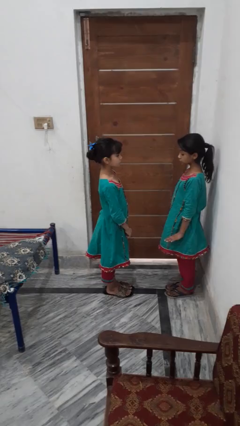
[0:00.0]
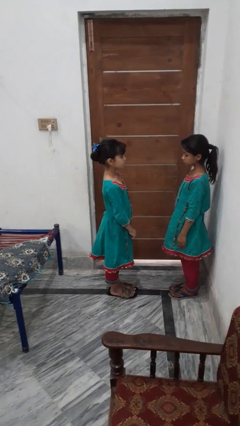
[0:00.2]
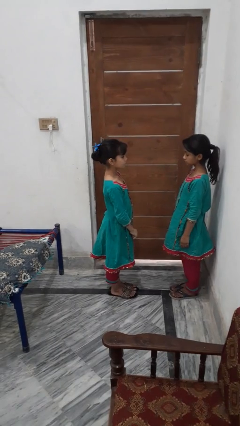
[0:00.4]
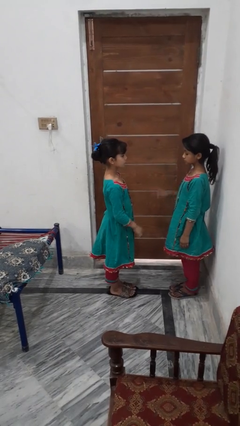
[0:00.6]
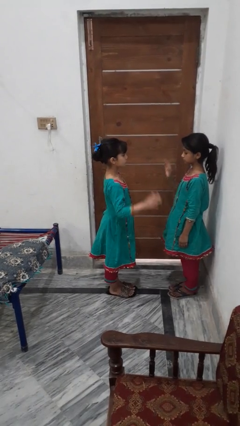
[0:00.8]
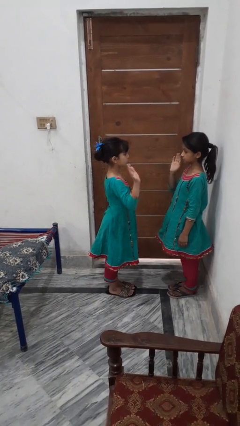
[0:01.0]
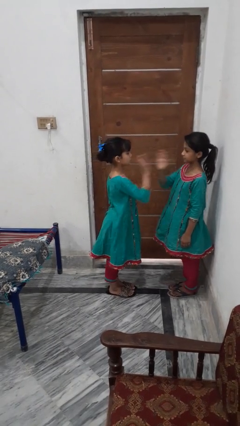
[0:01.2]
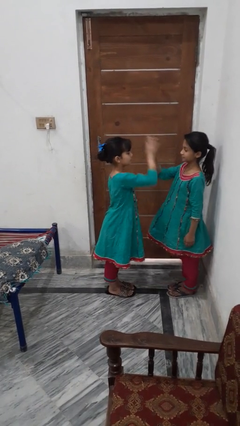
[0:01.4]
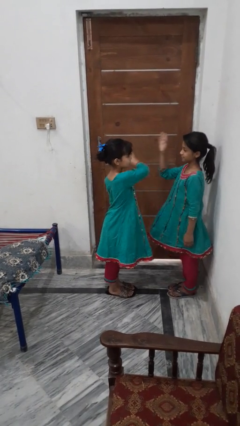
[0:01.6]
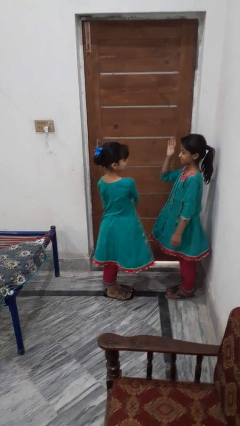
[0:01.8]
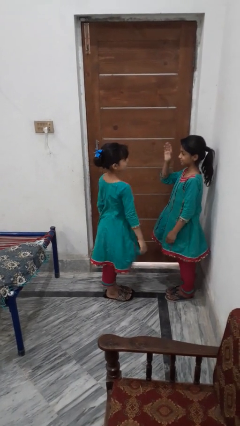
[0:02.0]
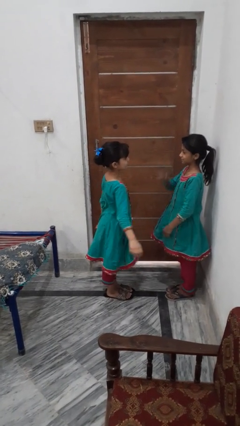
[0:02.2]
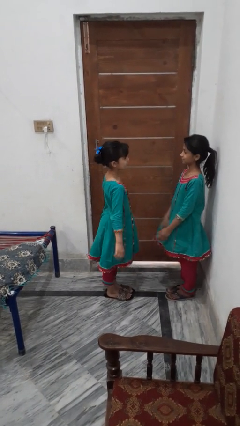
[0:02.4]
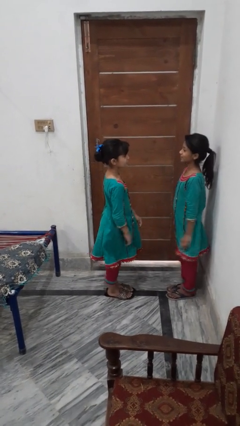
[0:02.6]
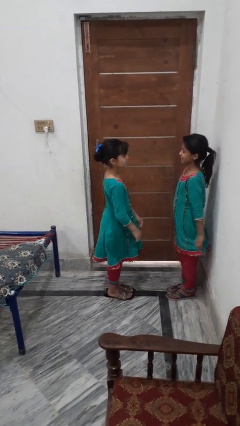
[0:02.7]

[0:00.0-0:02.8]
person highfives hand

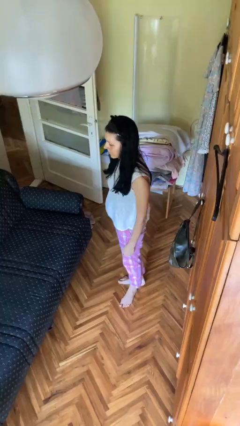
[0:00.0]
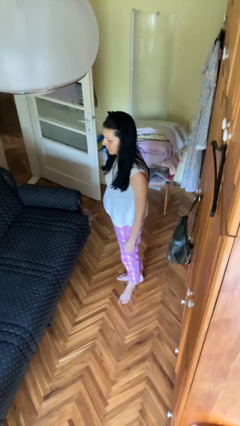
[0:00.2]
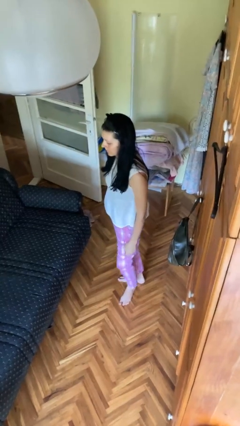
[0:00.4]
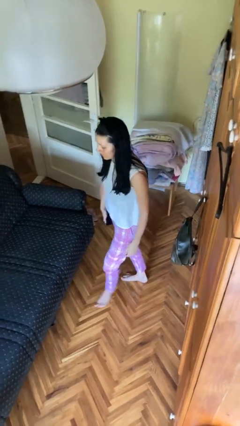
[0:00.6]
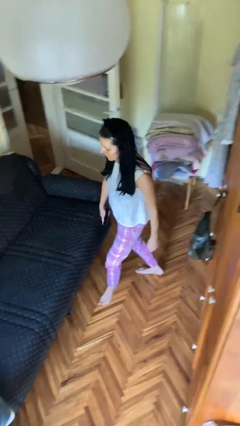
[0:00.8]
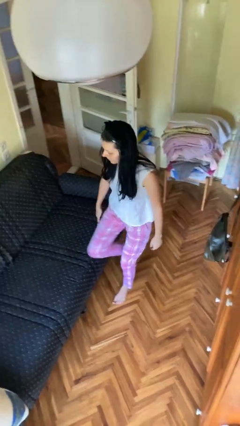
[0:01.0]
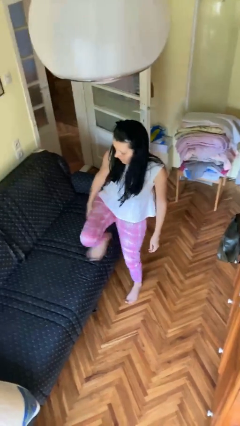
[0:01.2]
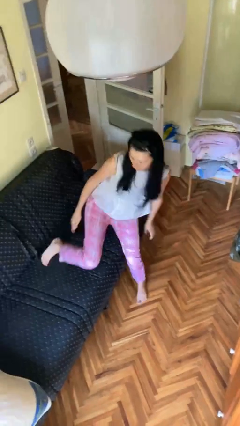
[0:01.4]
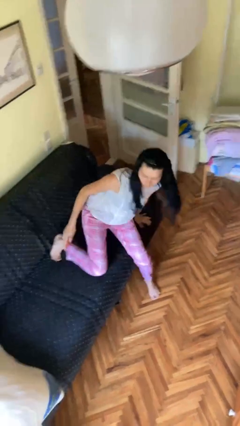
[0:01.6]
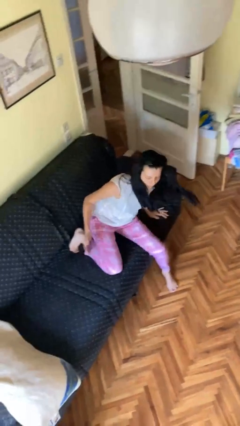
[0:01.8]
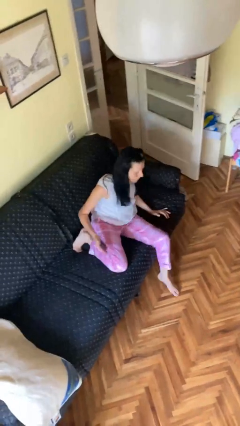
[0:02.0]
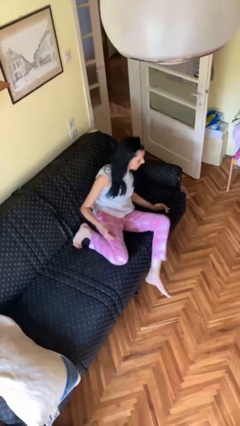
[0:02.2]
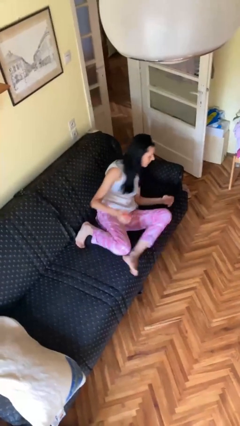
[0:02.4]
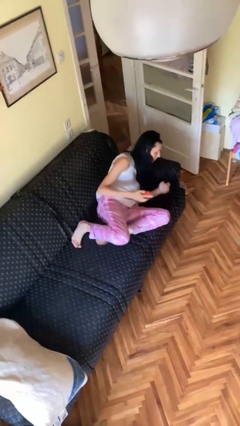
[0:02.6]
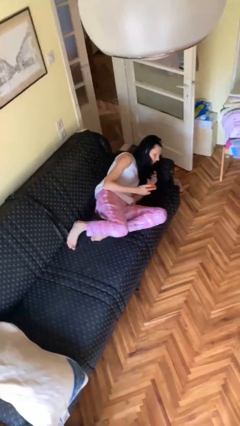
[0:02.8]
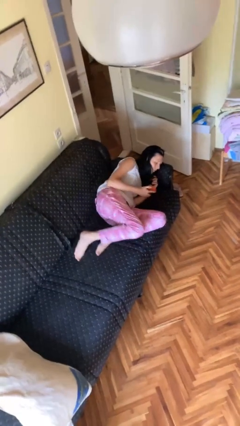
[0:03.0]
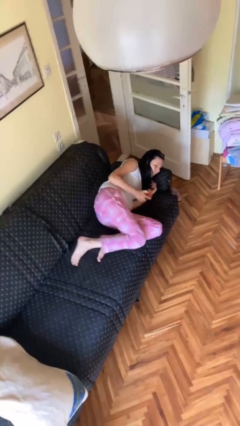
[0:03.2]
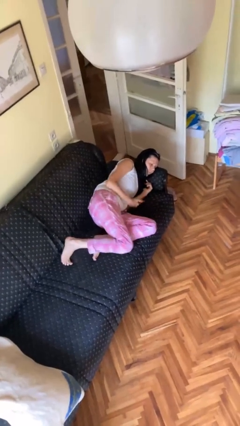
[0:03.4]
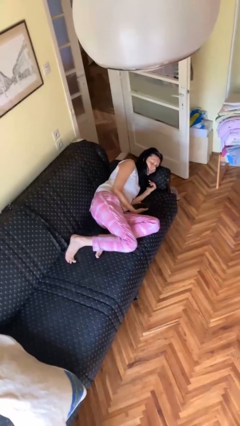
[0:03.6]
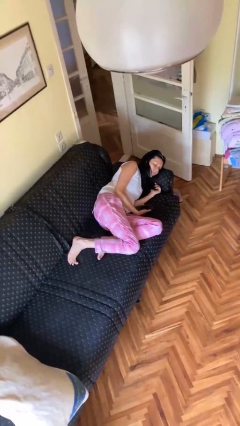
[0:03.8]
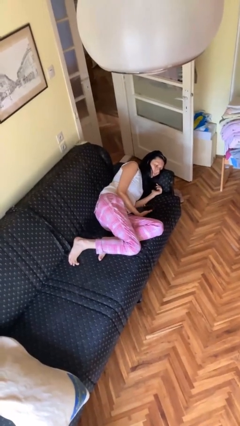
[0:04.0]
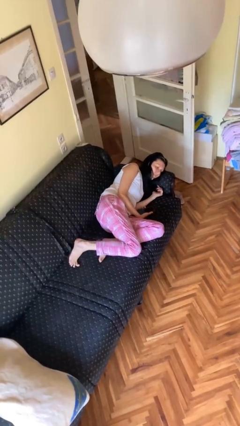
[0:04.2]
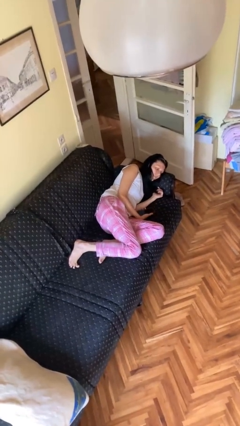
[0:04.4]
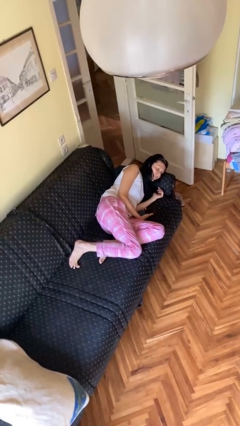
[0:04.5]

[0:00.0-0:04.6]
person lies down on couch

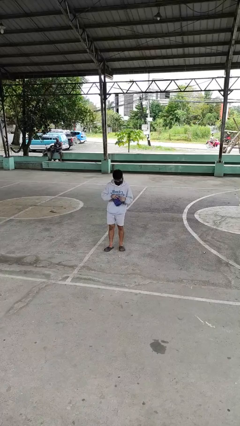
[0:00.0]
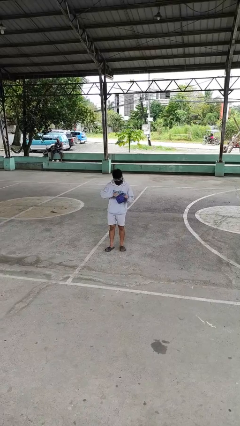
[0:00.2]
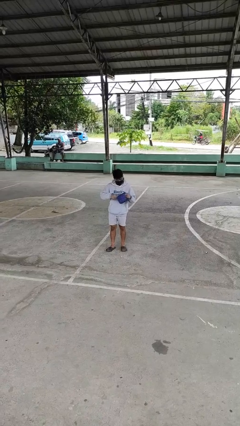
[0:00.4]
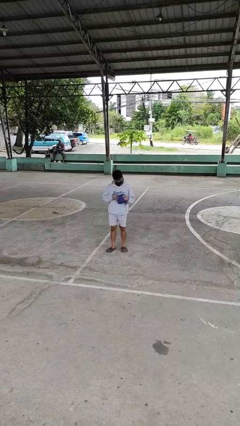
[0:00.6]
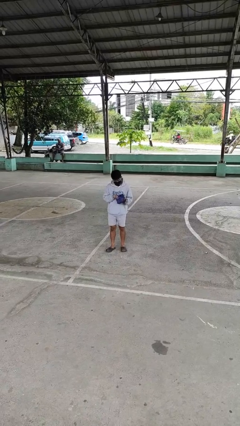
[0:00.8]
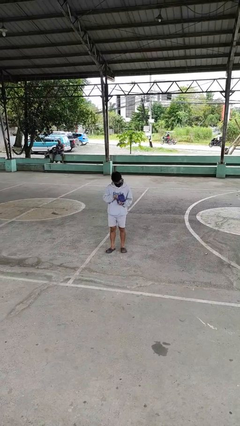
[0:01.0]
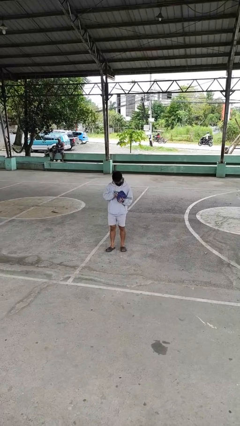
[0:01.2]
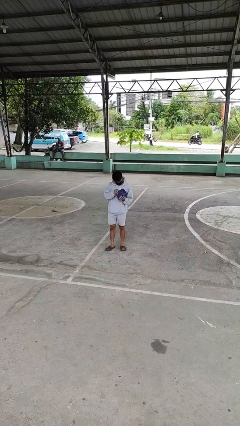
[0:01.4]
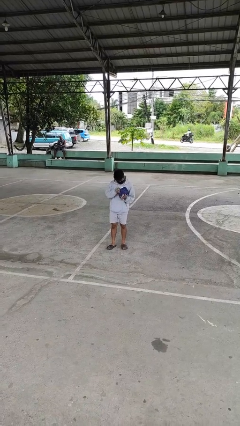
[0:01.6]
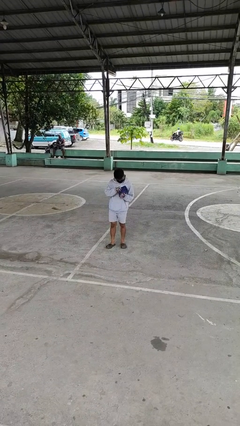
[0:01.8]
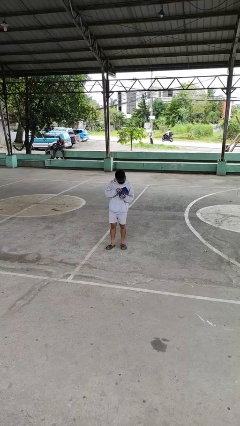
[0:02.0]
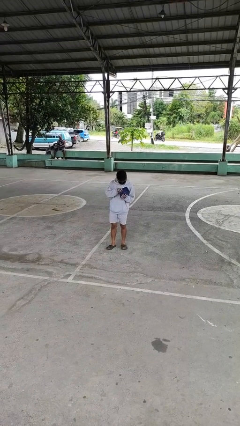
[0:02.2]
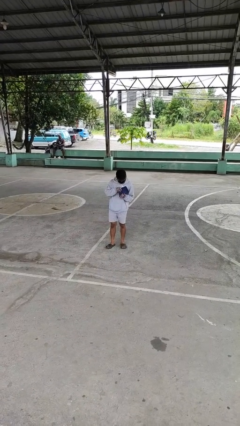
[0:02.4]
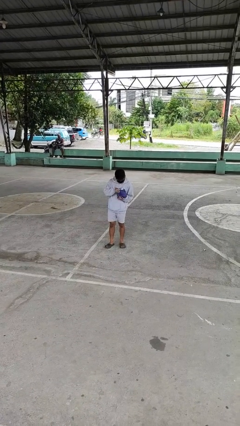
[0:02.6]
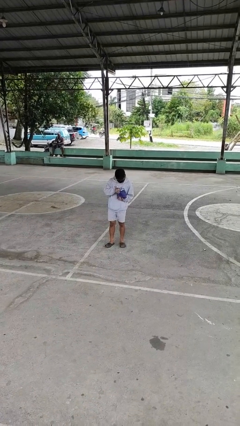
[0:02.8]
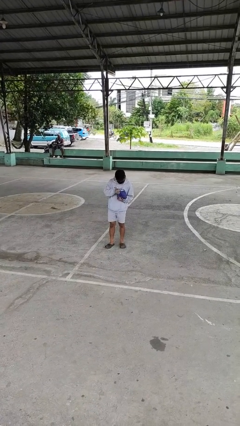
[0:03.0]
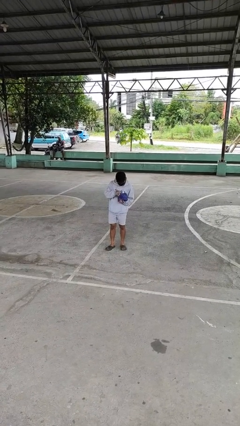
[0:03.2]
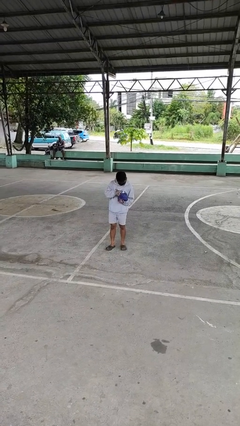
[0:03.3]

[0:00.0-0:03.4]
person searches in purse

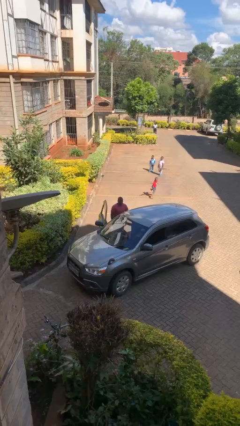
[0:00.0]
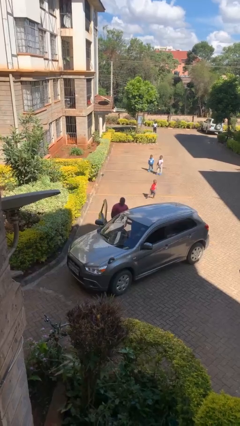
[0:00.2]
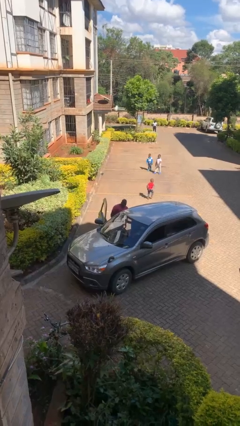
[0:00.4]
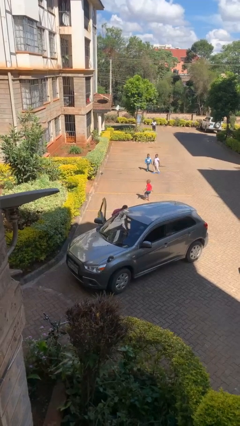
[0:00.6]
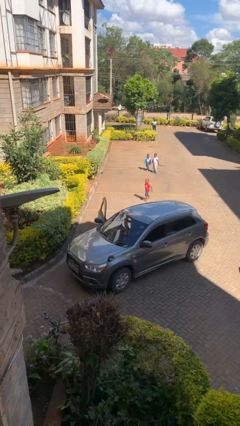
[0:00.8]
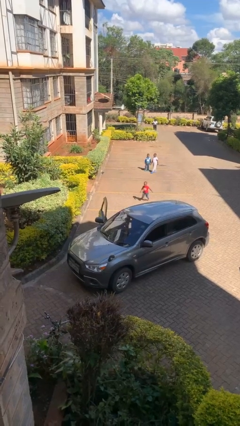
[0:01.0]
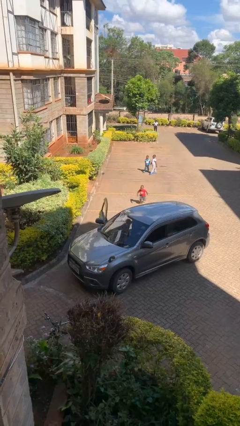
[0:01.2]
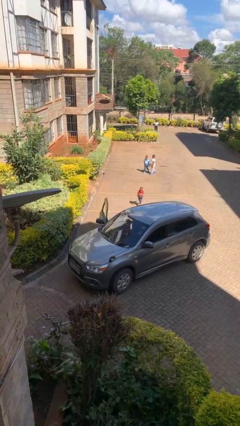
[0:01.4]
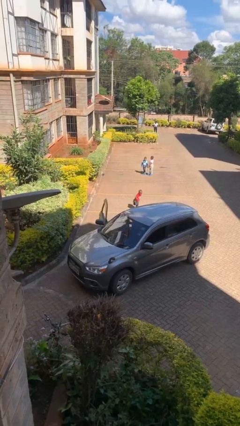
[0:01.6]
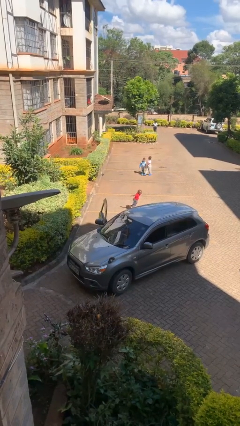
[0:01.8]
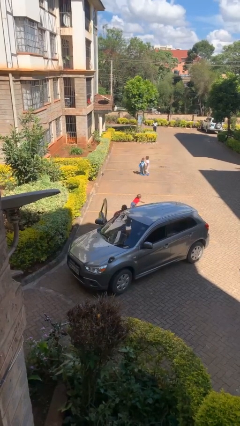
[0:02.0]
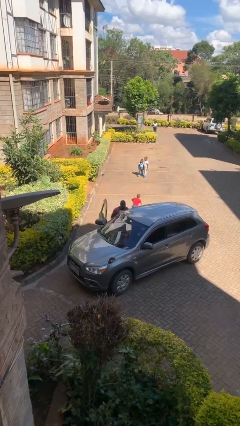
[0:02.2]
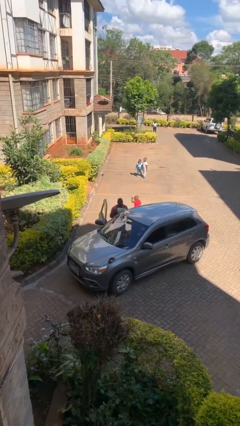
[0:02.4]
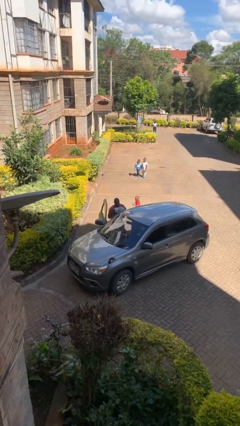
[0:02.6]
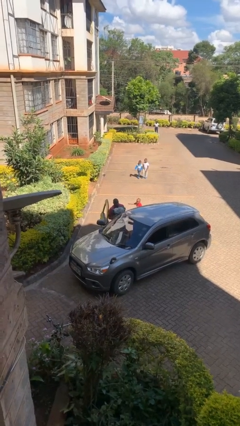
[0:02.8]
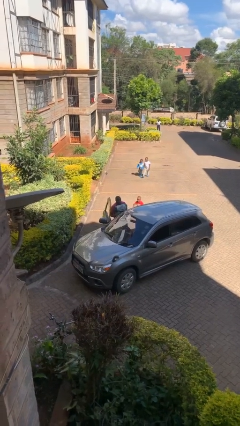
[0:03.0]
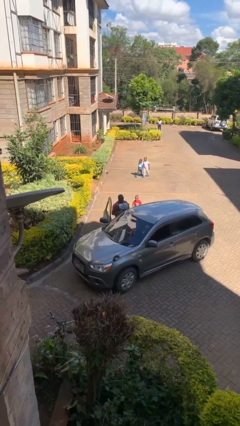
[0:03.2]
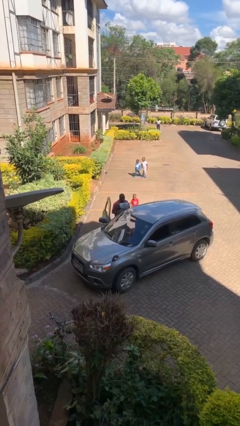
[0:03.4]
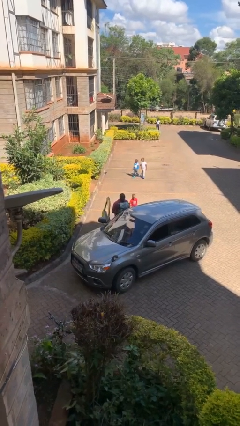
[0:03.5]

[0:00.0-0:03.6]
person unloads car

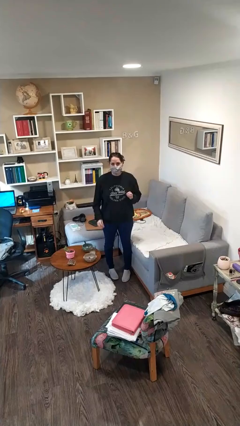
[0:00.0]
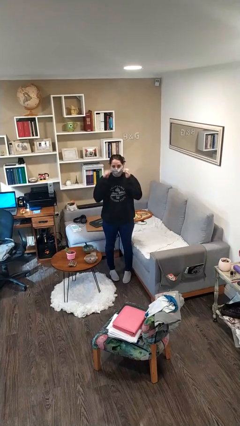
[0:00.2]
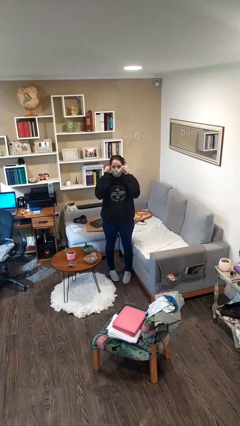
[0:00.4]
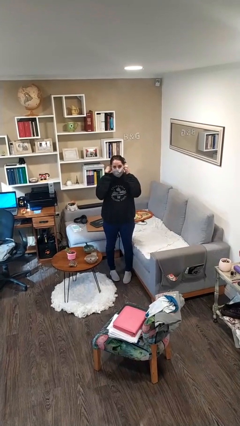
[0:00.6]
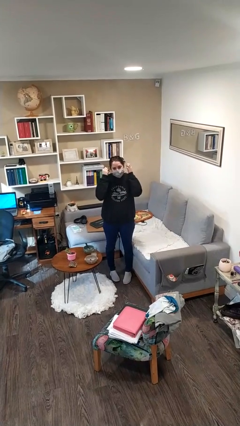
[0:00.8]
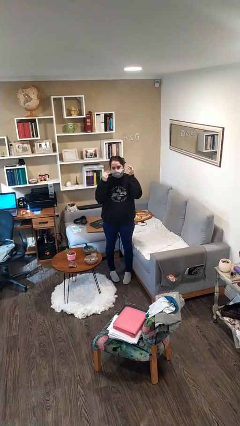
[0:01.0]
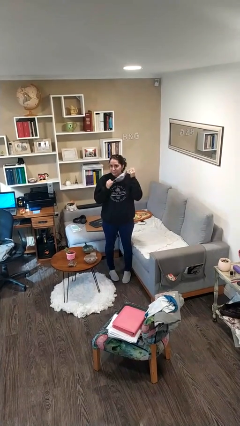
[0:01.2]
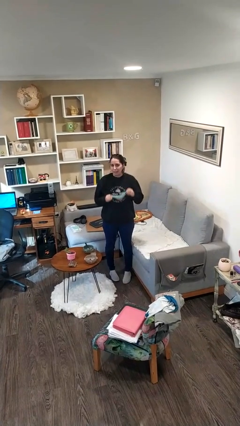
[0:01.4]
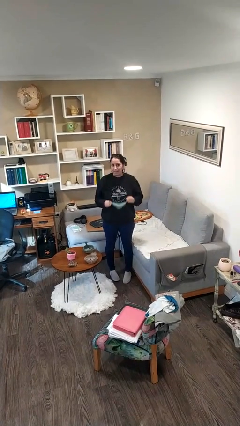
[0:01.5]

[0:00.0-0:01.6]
person takes off facemask

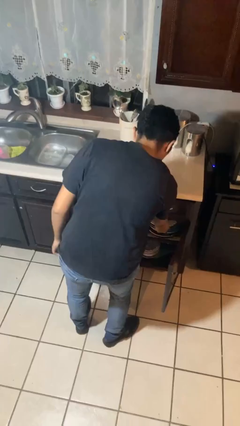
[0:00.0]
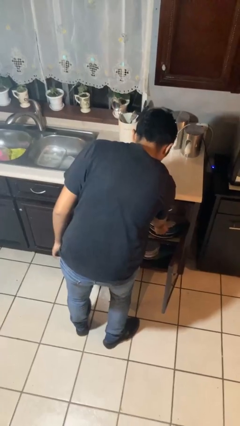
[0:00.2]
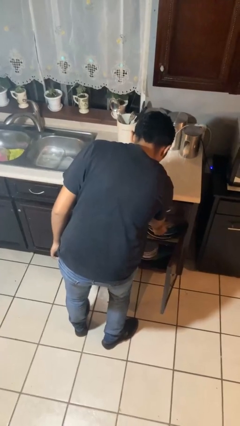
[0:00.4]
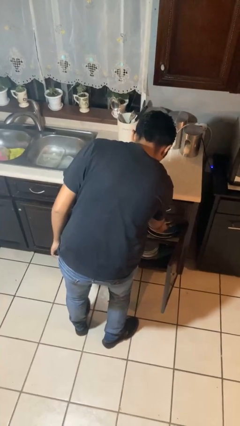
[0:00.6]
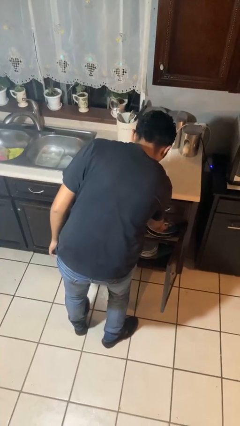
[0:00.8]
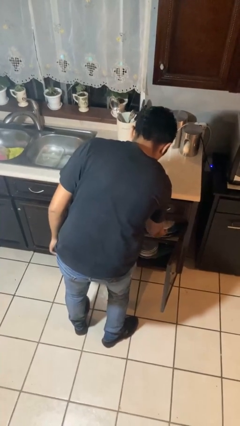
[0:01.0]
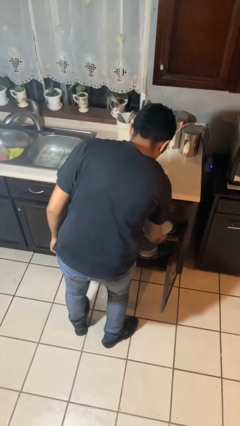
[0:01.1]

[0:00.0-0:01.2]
person puts object in cabinet
